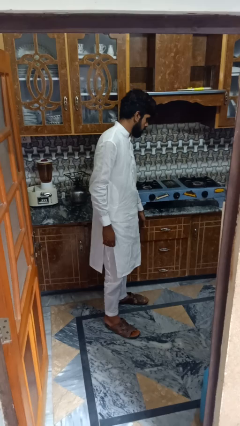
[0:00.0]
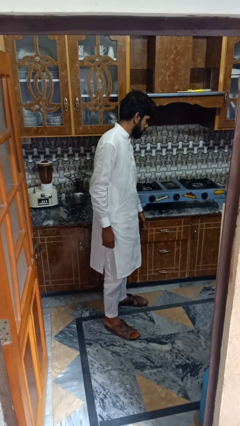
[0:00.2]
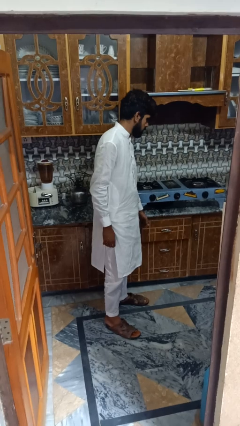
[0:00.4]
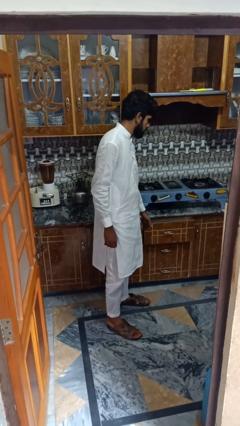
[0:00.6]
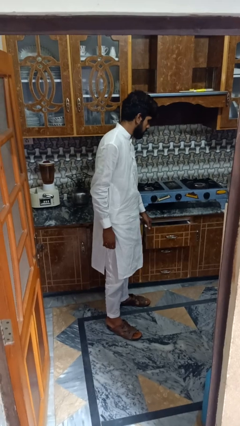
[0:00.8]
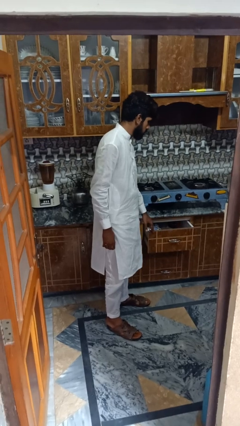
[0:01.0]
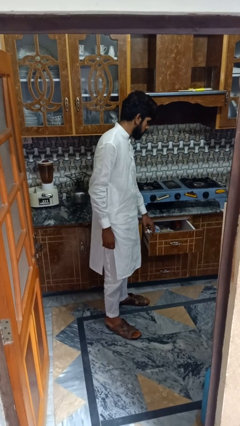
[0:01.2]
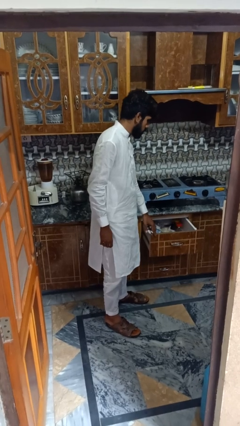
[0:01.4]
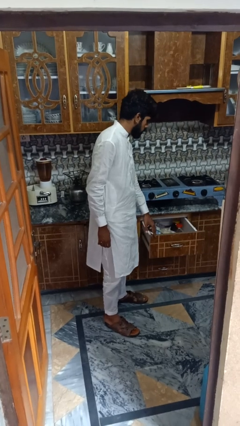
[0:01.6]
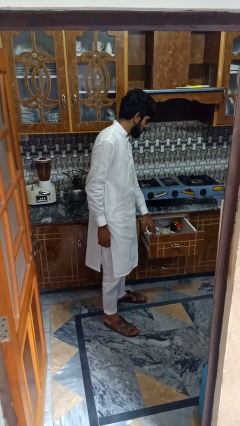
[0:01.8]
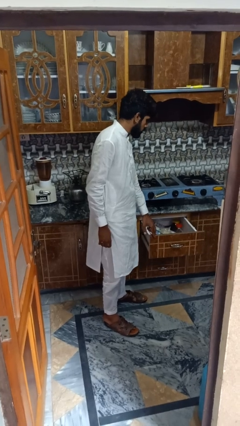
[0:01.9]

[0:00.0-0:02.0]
person opens kitchen drawer

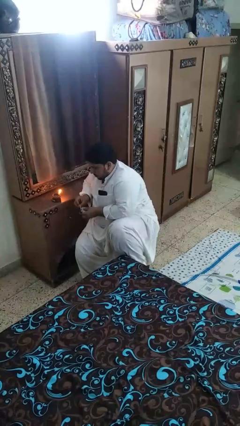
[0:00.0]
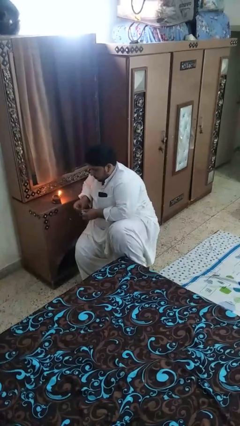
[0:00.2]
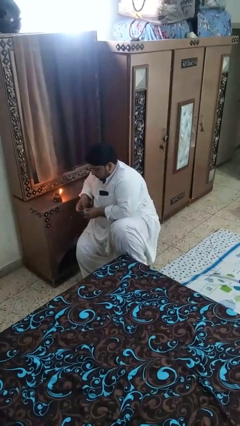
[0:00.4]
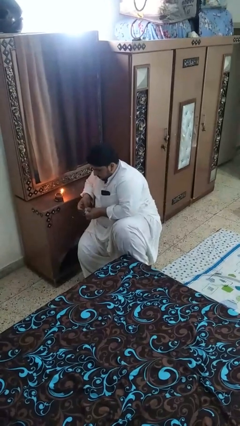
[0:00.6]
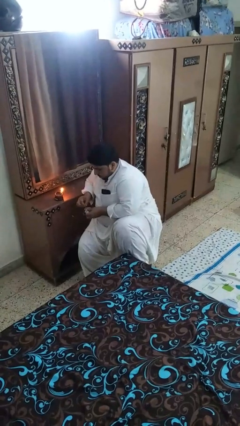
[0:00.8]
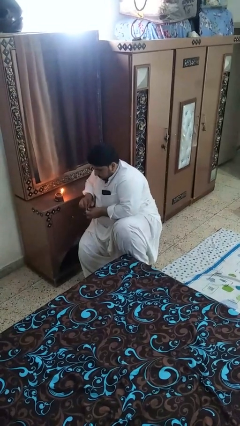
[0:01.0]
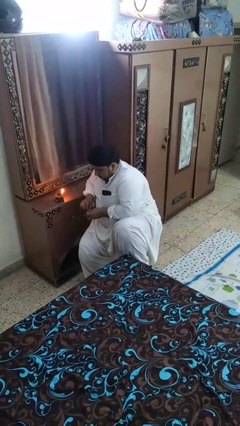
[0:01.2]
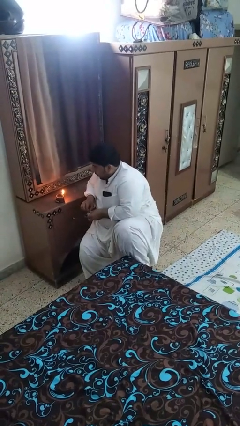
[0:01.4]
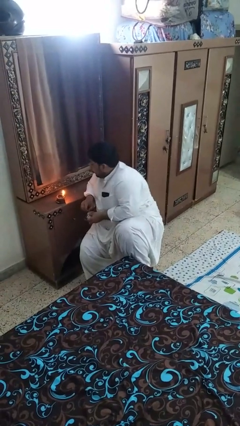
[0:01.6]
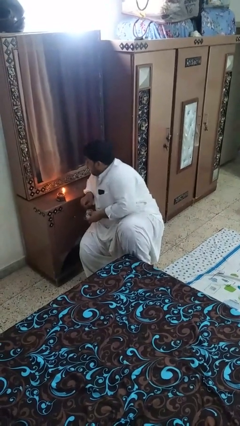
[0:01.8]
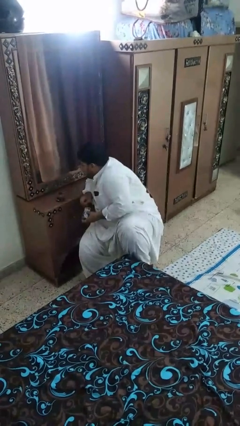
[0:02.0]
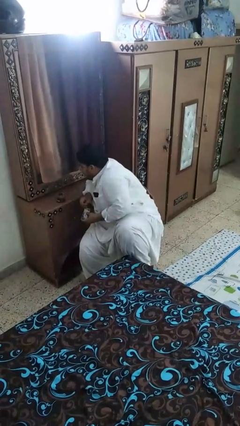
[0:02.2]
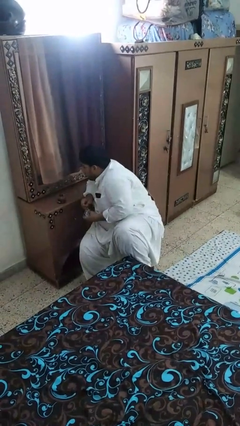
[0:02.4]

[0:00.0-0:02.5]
person extinguishes candle

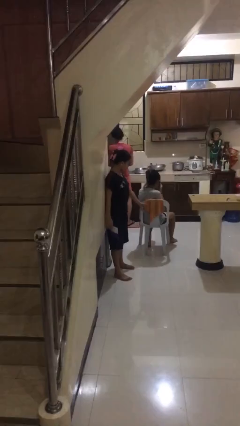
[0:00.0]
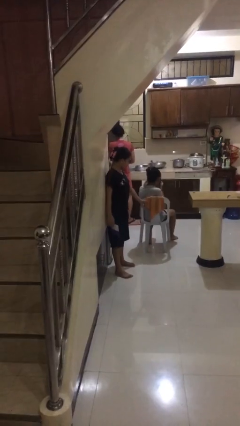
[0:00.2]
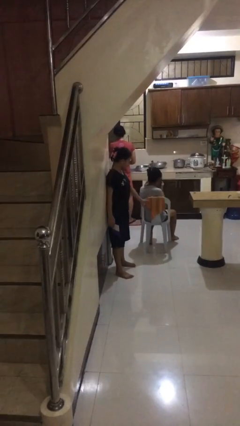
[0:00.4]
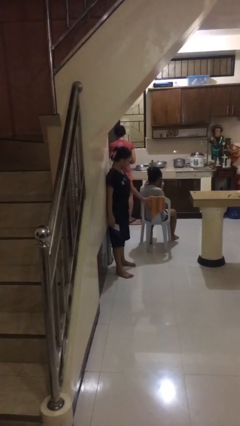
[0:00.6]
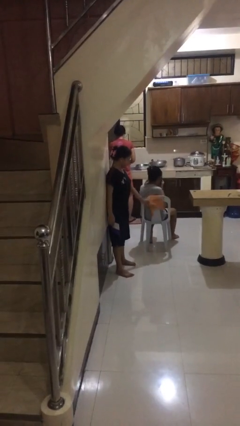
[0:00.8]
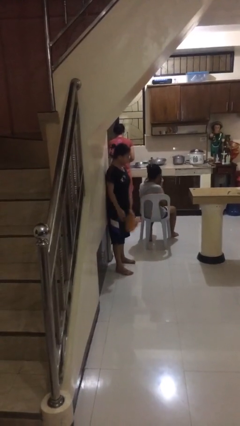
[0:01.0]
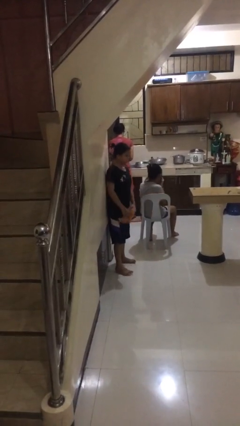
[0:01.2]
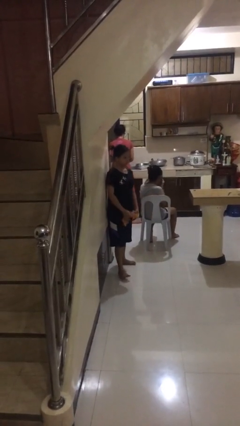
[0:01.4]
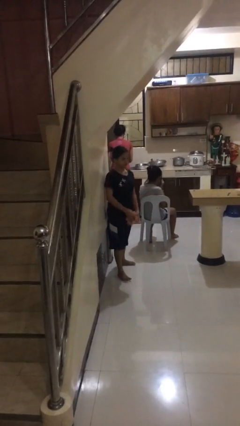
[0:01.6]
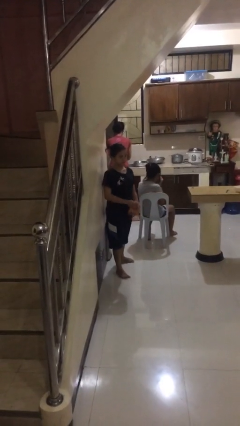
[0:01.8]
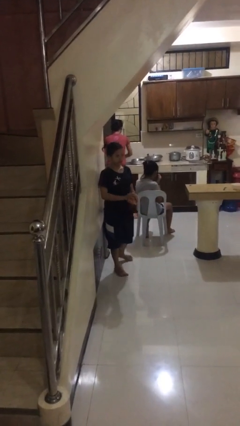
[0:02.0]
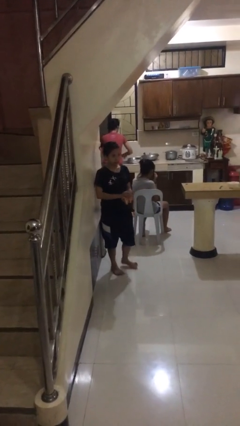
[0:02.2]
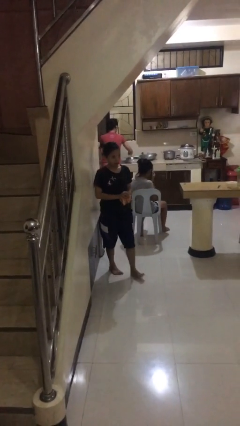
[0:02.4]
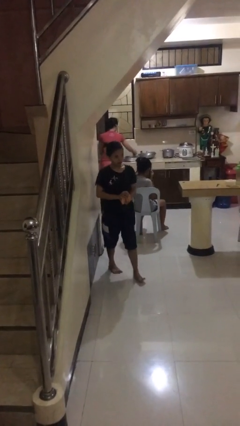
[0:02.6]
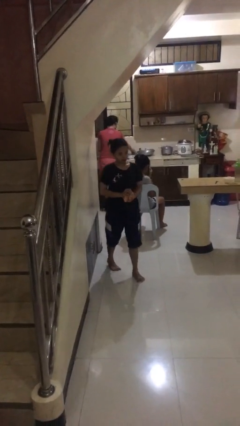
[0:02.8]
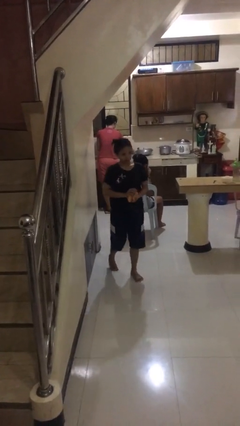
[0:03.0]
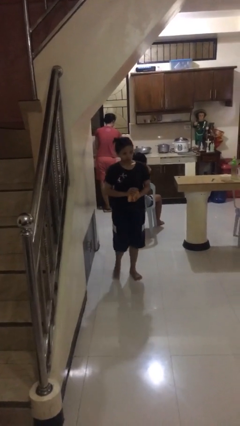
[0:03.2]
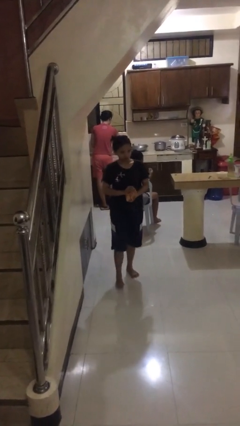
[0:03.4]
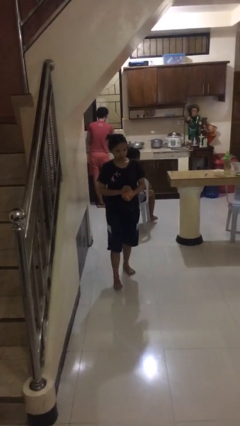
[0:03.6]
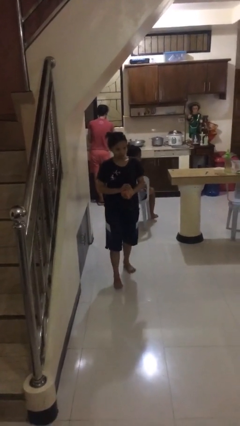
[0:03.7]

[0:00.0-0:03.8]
person steals object from person

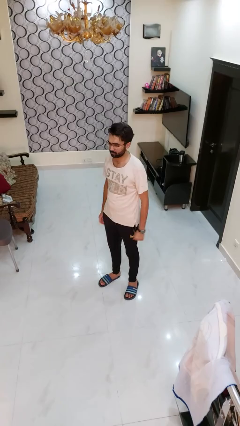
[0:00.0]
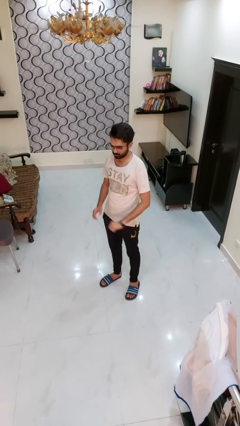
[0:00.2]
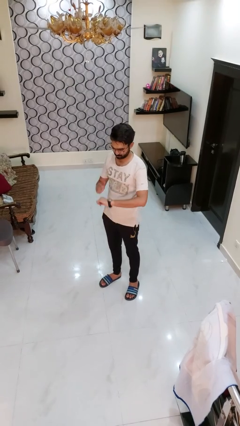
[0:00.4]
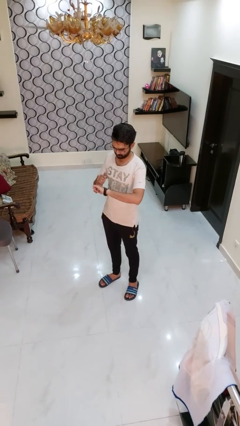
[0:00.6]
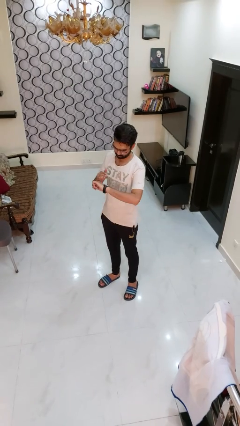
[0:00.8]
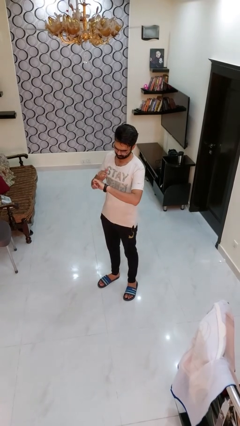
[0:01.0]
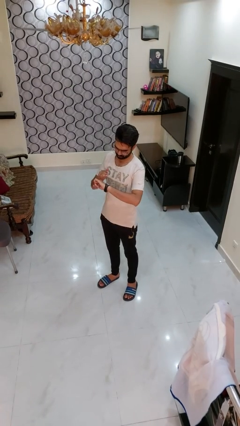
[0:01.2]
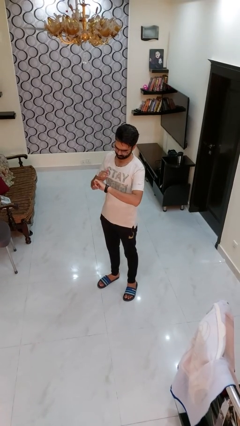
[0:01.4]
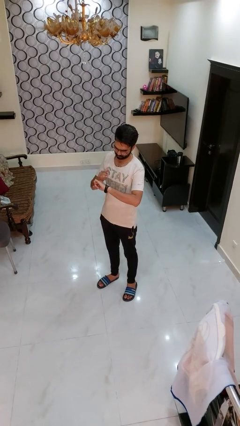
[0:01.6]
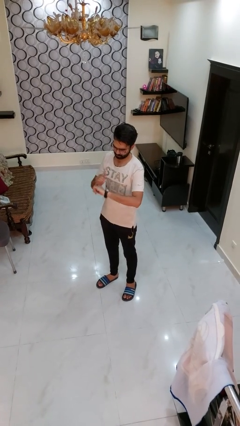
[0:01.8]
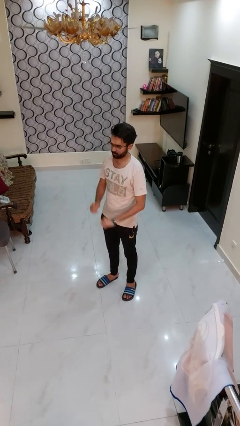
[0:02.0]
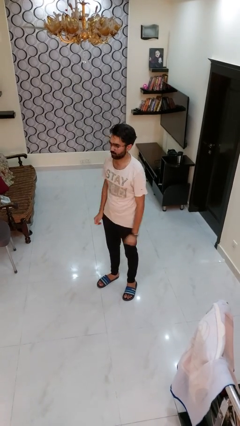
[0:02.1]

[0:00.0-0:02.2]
person looks at wristwatch

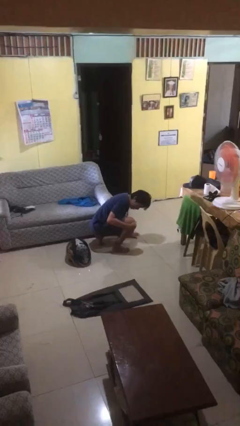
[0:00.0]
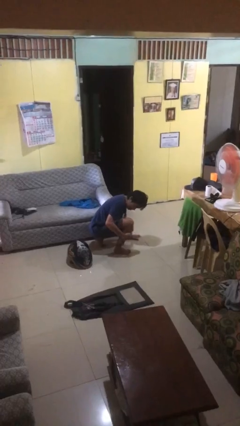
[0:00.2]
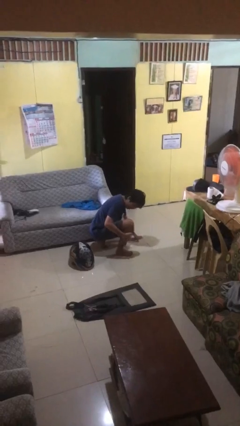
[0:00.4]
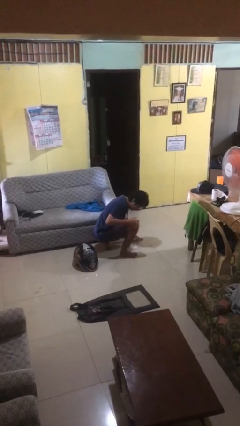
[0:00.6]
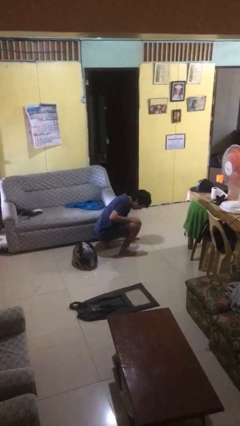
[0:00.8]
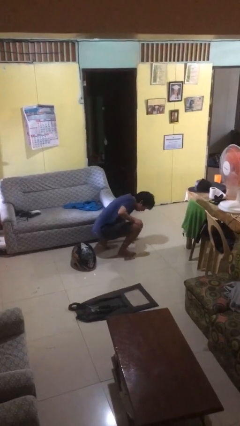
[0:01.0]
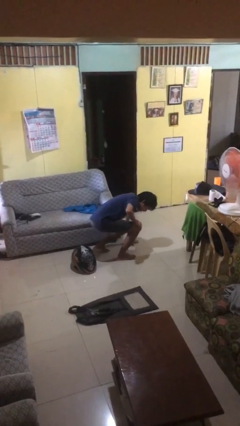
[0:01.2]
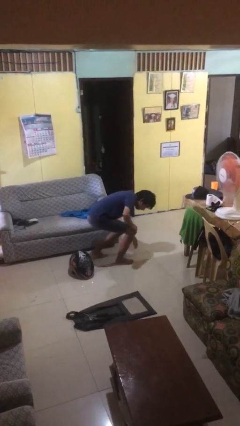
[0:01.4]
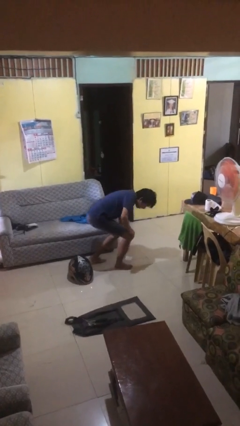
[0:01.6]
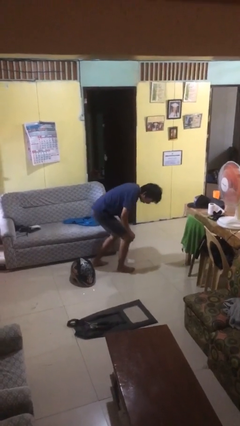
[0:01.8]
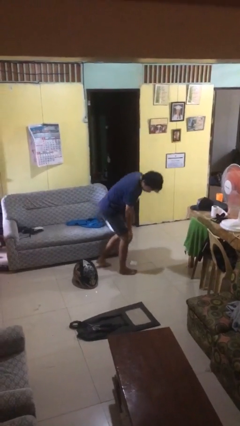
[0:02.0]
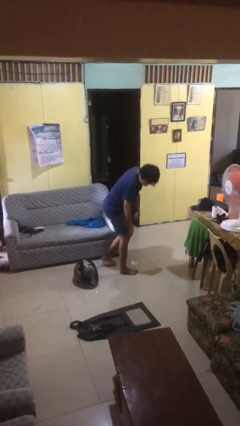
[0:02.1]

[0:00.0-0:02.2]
person lies down on floor

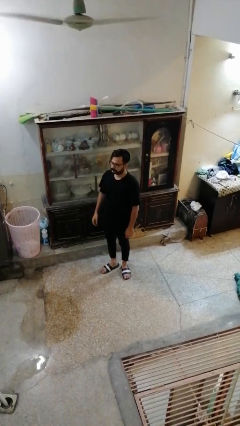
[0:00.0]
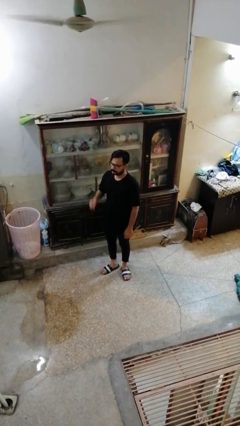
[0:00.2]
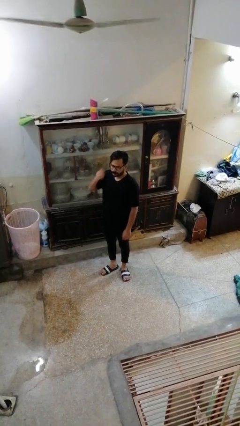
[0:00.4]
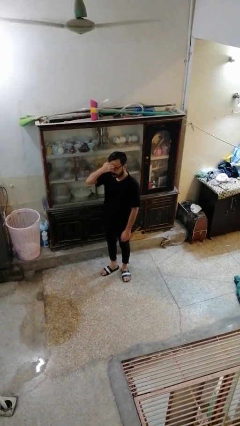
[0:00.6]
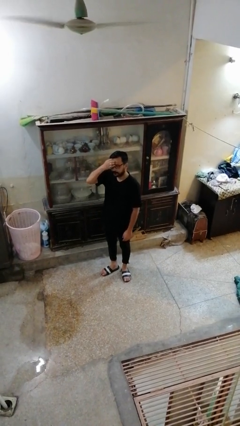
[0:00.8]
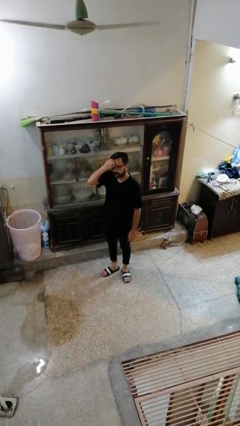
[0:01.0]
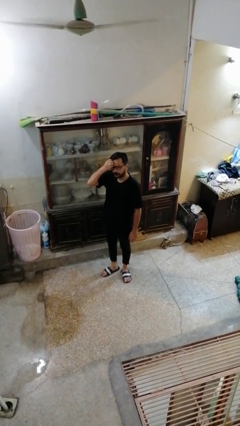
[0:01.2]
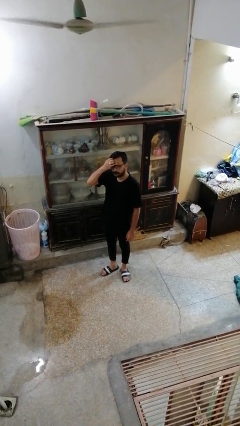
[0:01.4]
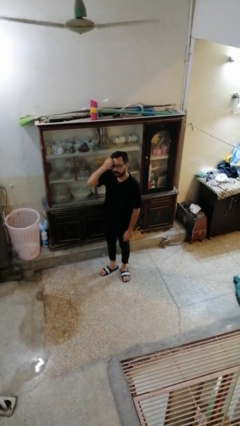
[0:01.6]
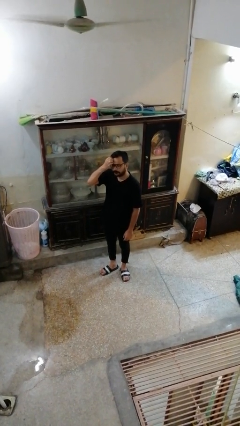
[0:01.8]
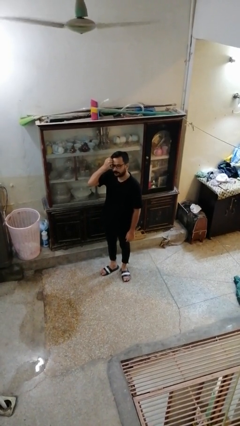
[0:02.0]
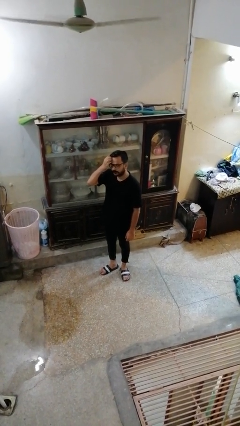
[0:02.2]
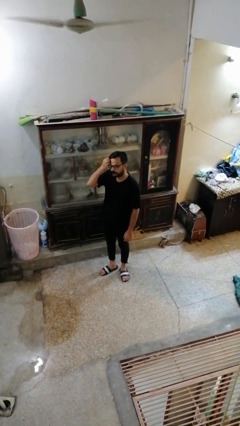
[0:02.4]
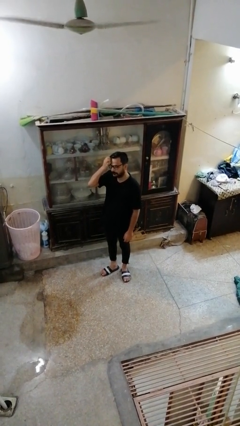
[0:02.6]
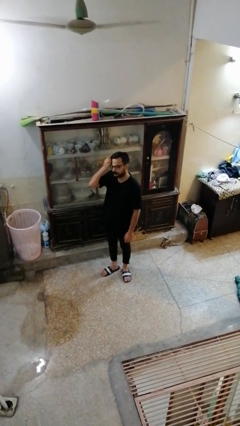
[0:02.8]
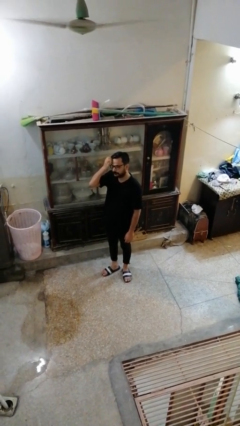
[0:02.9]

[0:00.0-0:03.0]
person scratches face

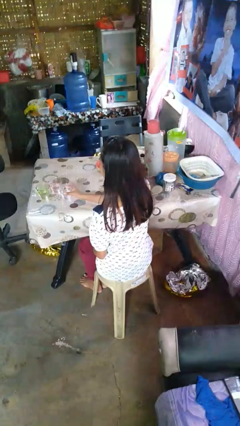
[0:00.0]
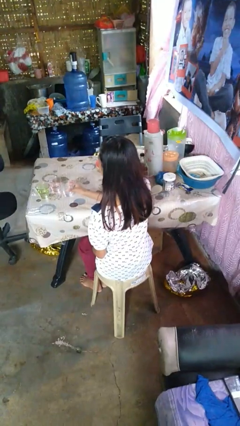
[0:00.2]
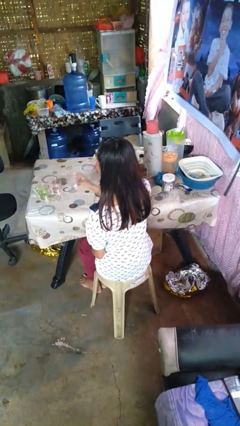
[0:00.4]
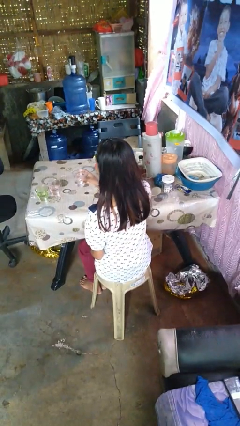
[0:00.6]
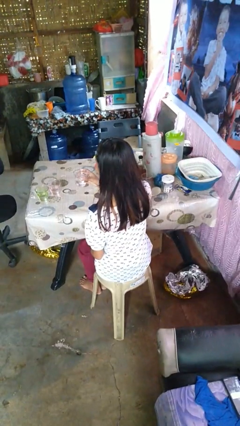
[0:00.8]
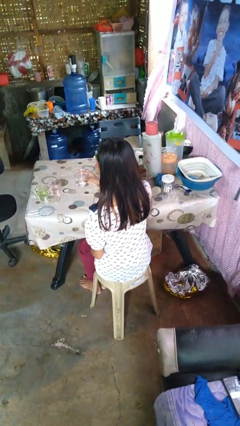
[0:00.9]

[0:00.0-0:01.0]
person picks up object from table

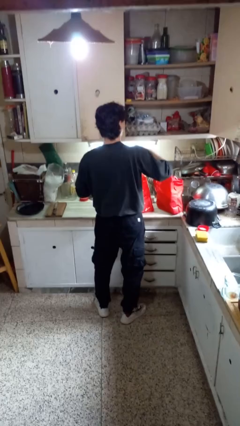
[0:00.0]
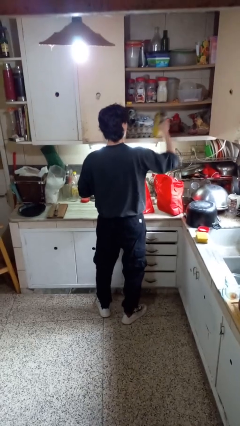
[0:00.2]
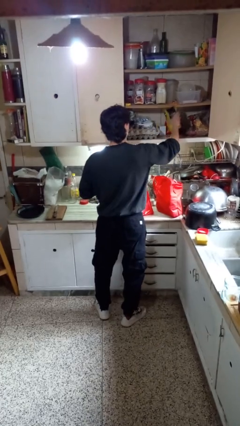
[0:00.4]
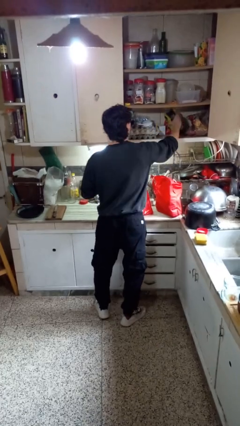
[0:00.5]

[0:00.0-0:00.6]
person loads groceries into cabinet
